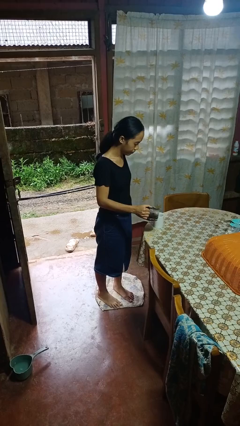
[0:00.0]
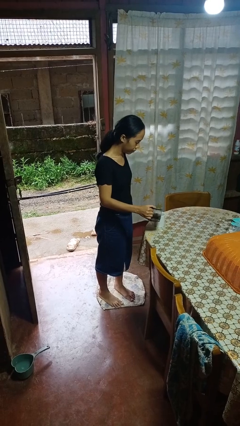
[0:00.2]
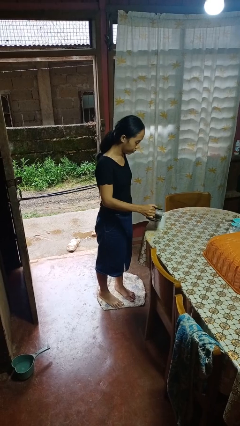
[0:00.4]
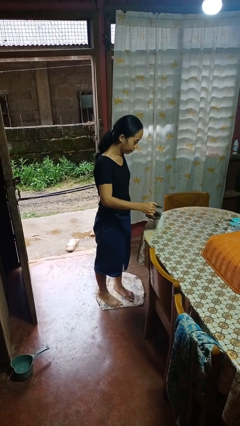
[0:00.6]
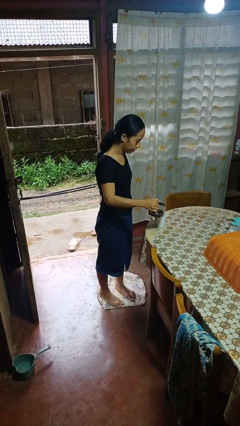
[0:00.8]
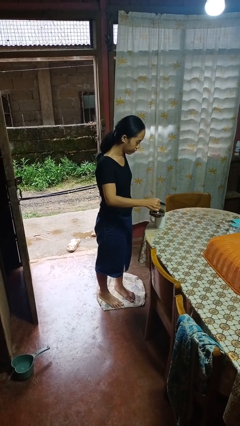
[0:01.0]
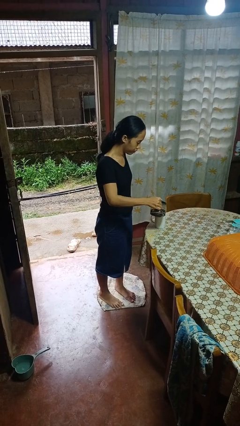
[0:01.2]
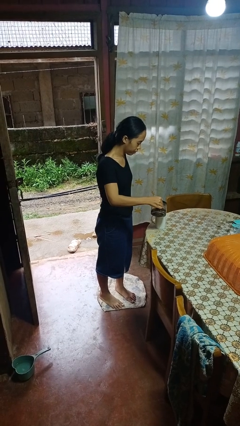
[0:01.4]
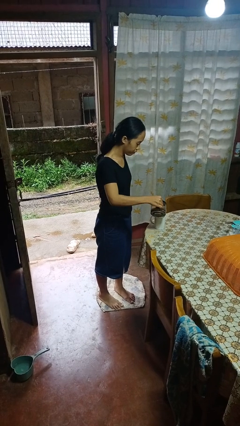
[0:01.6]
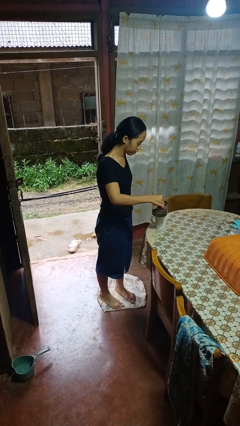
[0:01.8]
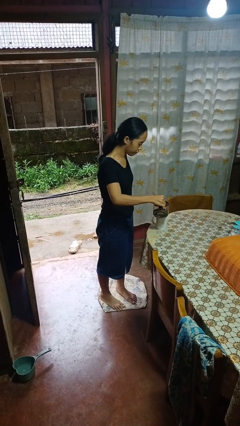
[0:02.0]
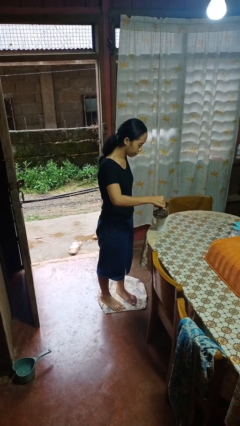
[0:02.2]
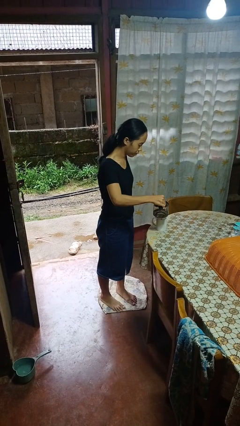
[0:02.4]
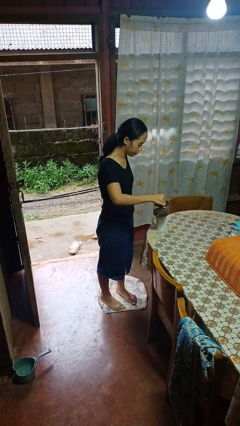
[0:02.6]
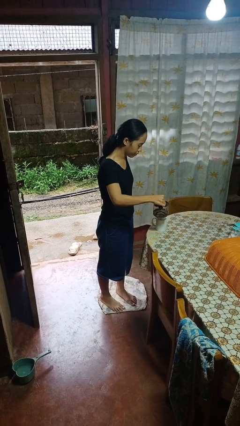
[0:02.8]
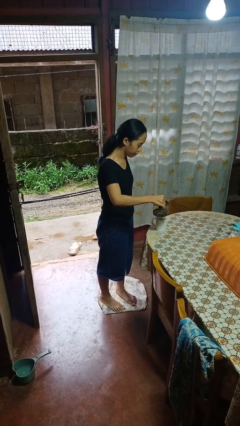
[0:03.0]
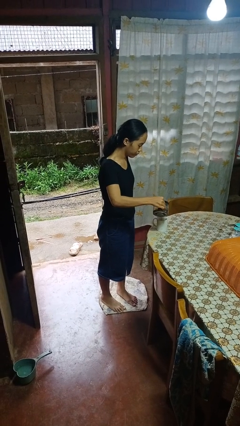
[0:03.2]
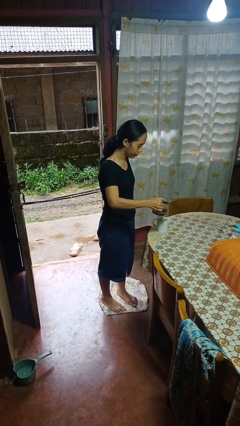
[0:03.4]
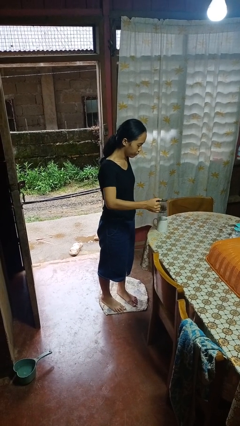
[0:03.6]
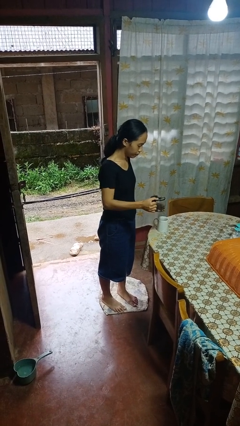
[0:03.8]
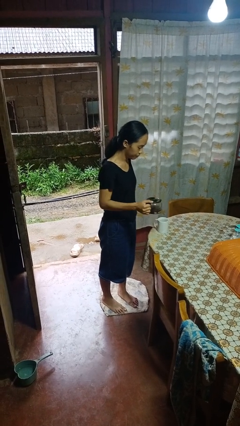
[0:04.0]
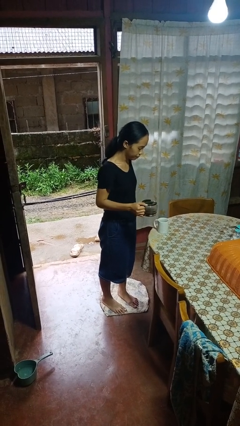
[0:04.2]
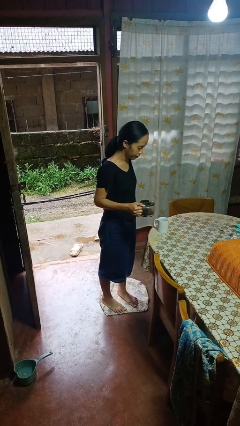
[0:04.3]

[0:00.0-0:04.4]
person pours coffee into mug

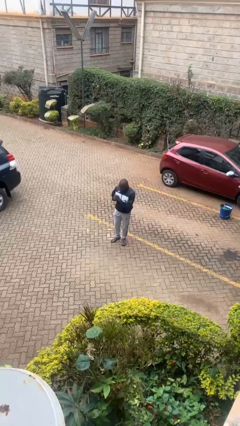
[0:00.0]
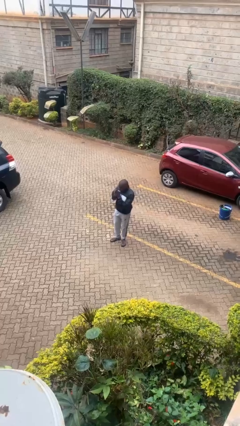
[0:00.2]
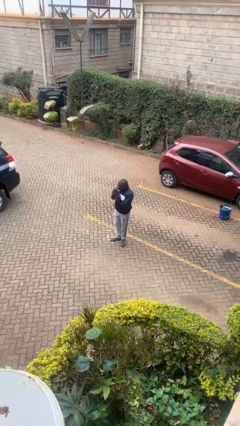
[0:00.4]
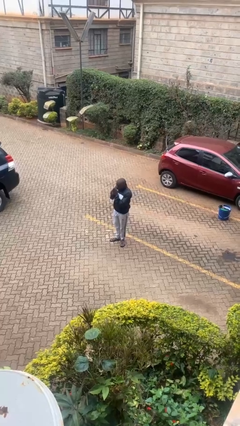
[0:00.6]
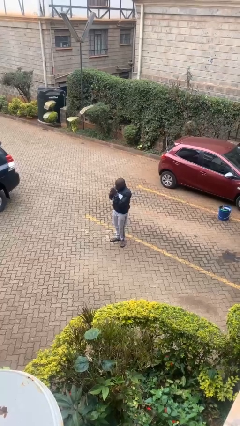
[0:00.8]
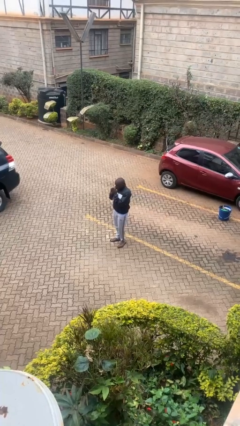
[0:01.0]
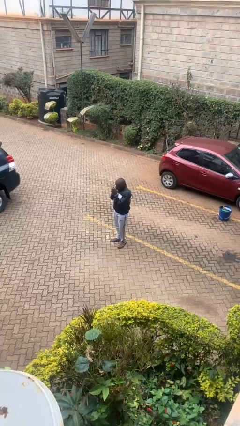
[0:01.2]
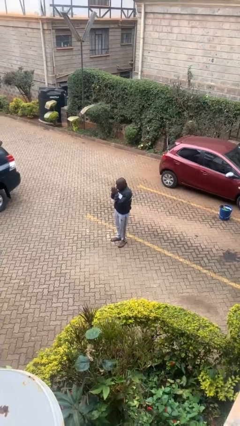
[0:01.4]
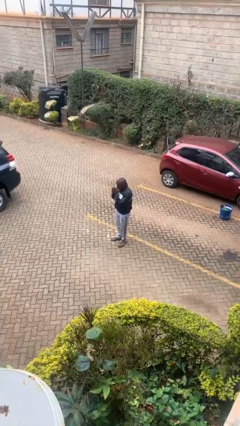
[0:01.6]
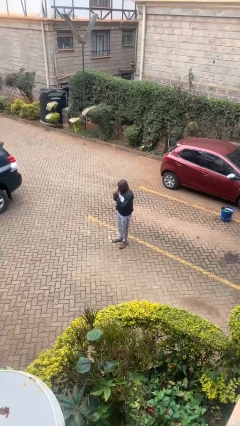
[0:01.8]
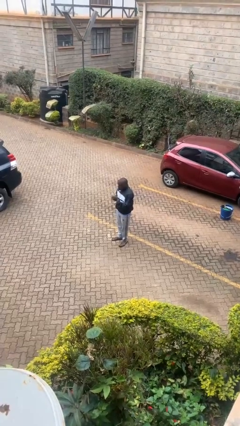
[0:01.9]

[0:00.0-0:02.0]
person blows into hands

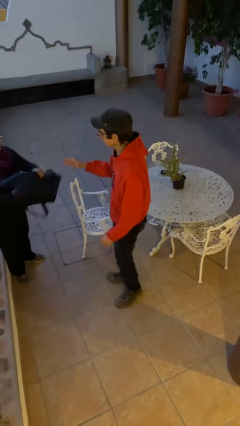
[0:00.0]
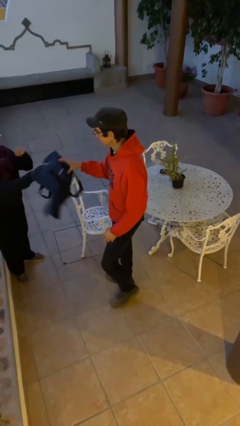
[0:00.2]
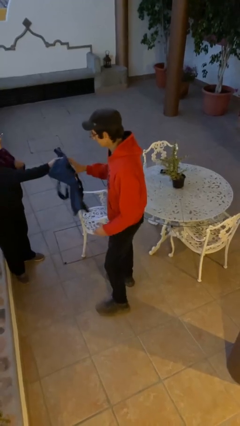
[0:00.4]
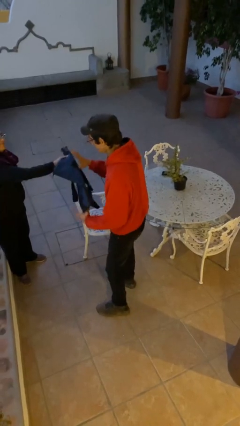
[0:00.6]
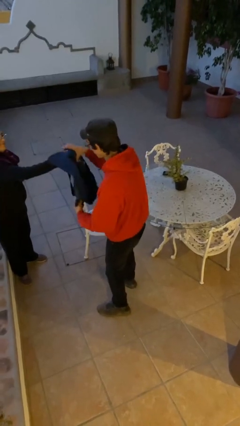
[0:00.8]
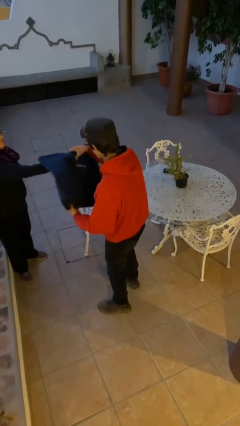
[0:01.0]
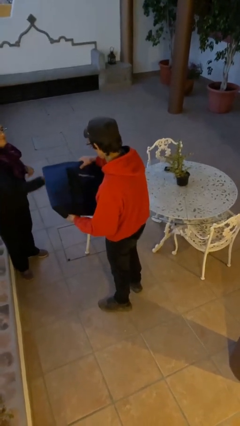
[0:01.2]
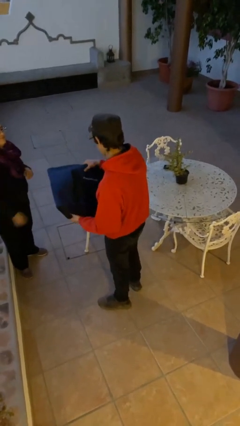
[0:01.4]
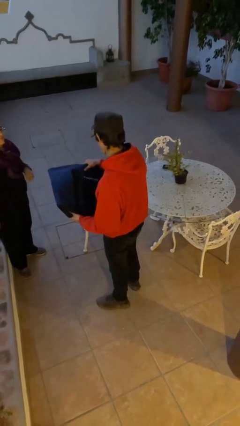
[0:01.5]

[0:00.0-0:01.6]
person transfers object to person

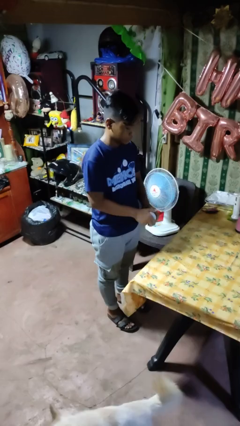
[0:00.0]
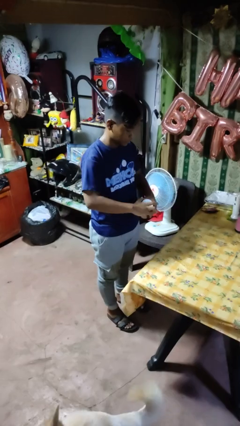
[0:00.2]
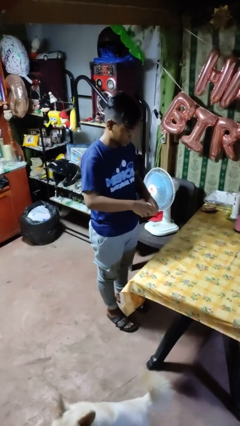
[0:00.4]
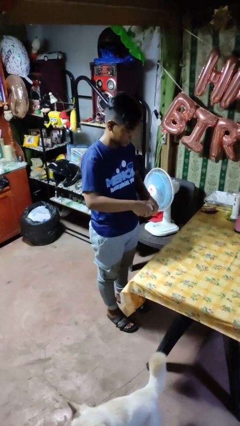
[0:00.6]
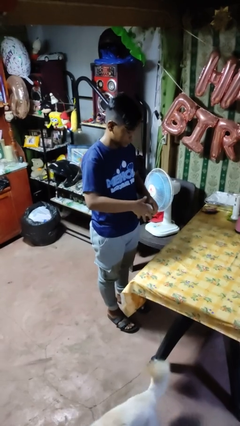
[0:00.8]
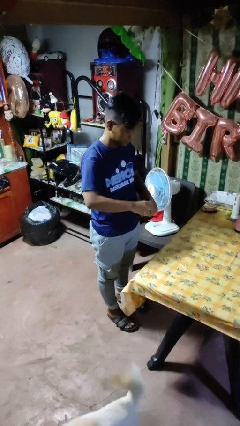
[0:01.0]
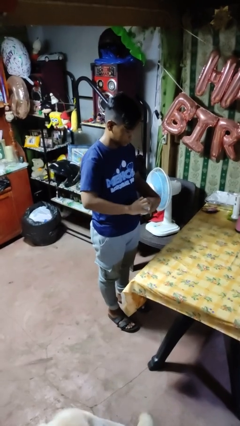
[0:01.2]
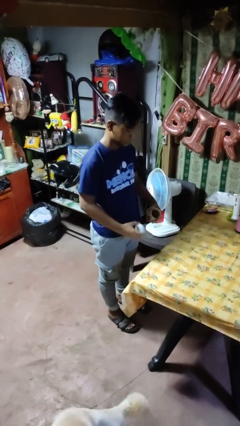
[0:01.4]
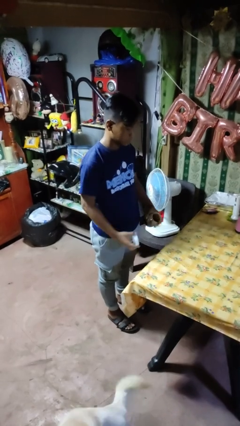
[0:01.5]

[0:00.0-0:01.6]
person opens jar

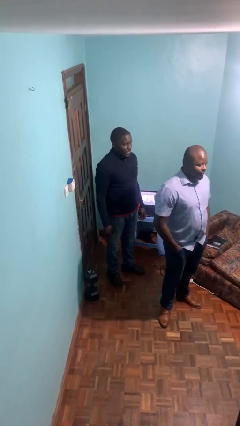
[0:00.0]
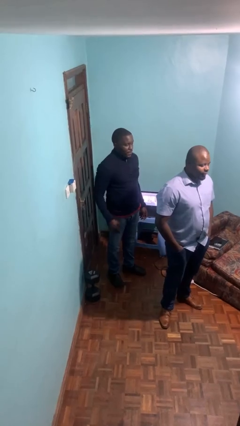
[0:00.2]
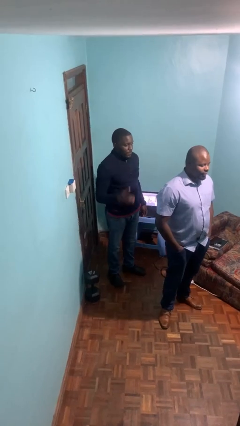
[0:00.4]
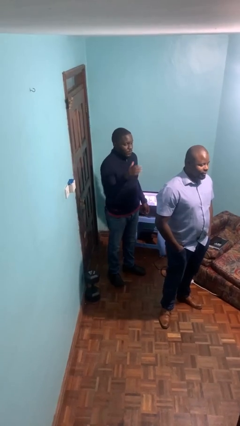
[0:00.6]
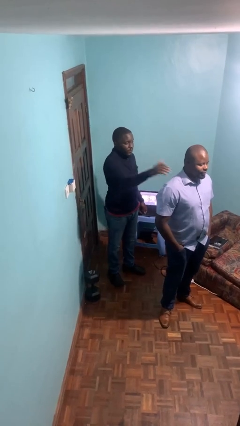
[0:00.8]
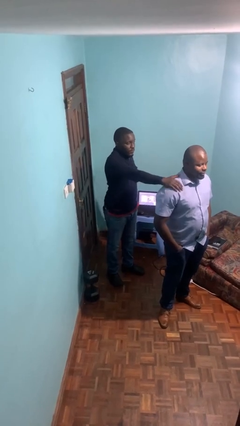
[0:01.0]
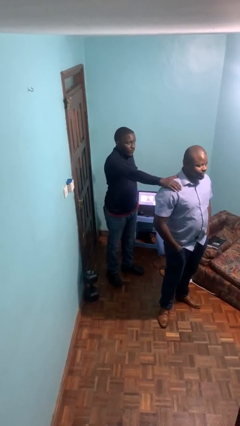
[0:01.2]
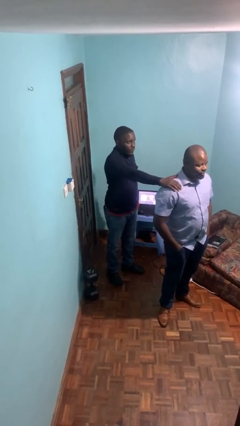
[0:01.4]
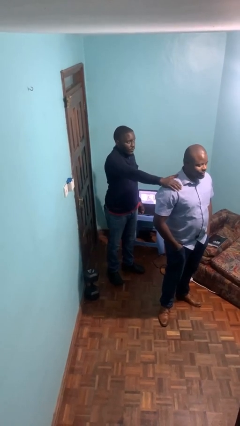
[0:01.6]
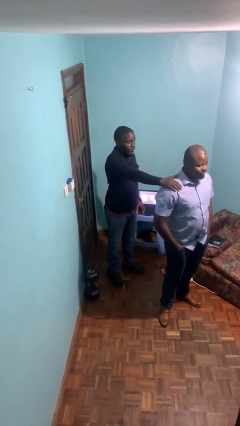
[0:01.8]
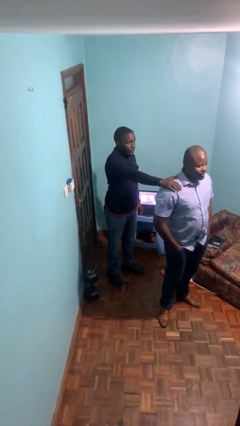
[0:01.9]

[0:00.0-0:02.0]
person grabs person by shoulder

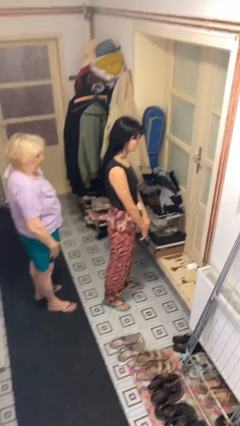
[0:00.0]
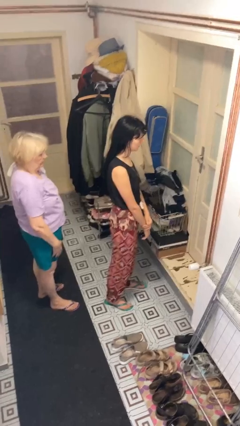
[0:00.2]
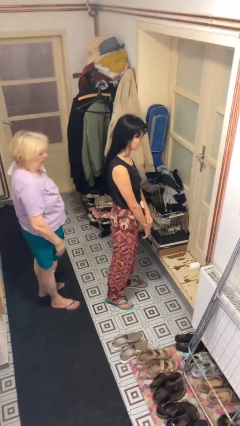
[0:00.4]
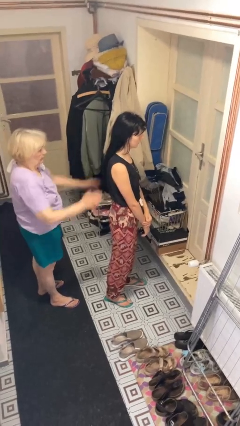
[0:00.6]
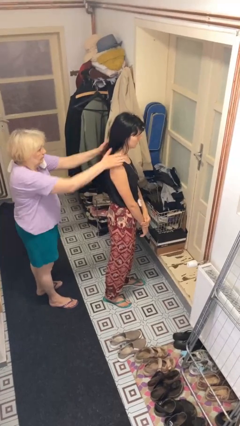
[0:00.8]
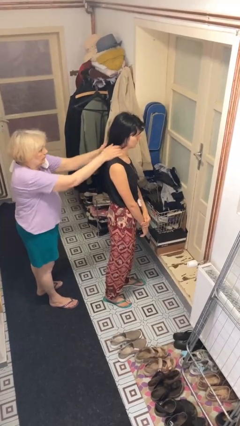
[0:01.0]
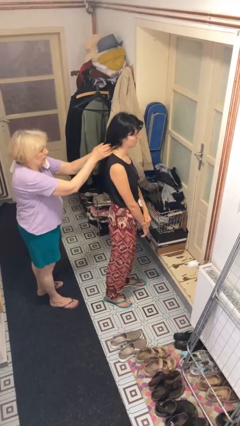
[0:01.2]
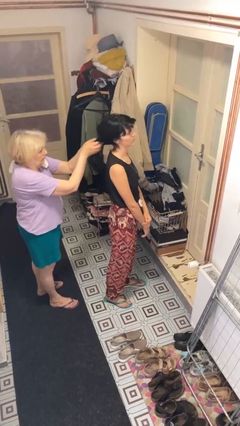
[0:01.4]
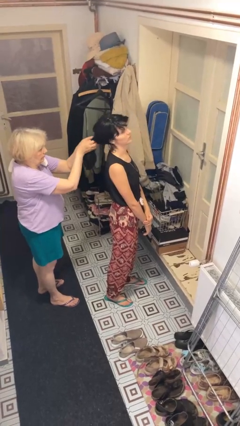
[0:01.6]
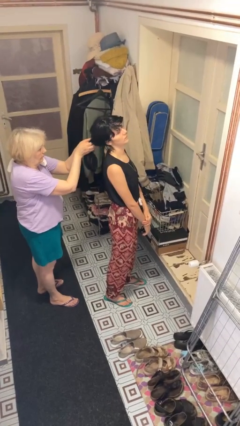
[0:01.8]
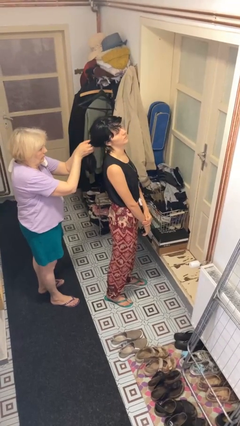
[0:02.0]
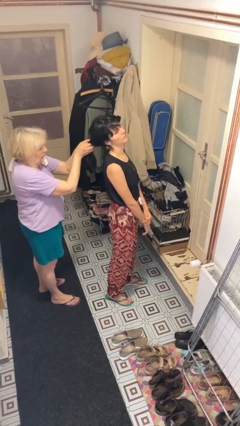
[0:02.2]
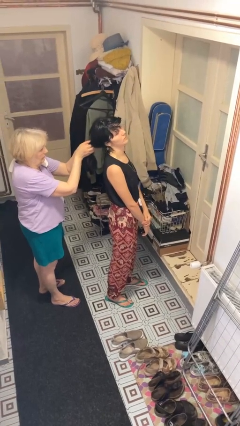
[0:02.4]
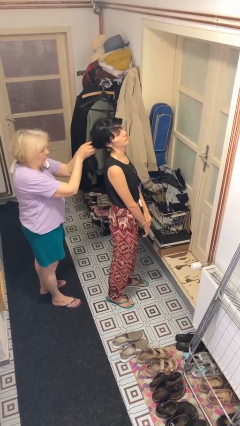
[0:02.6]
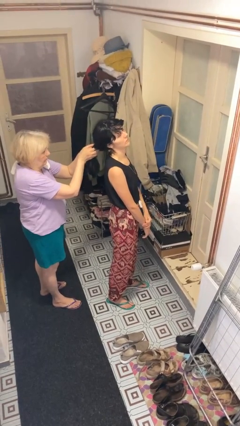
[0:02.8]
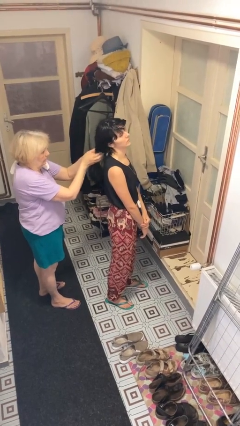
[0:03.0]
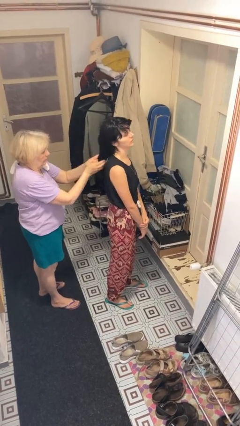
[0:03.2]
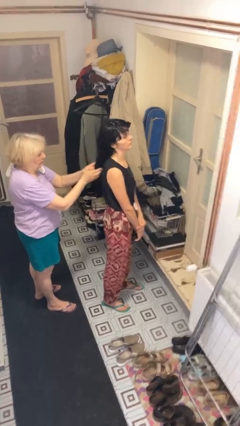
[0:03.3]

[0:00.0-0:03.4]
person grabs person by hair

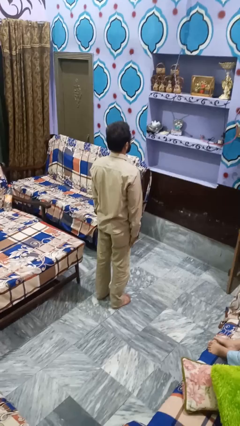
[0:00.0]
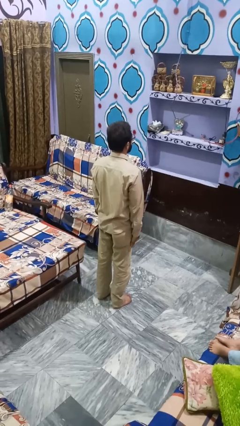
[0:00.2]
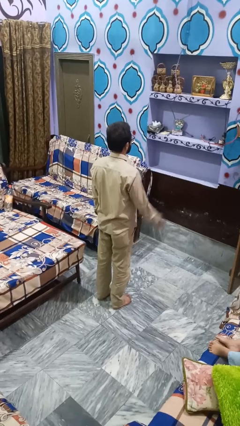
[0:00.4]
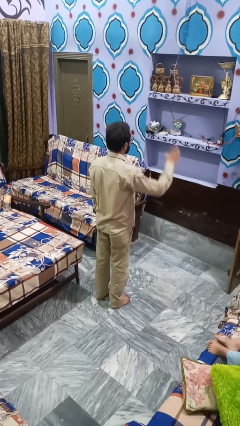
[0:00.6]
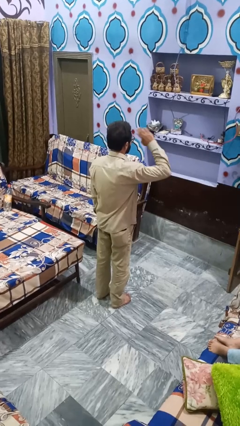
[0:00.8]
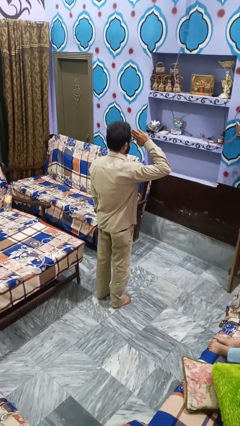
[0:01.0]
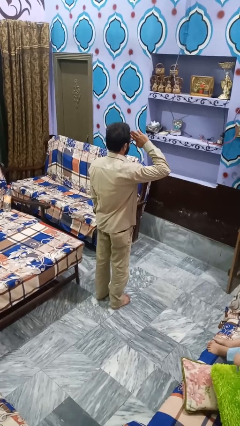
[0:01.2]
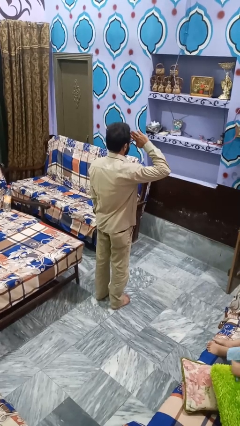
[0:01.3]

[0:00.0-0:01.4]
person salutes

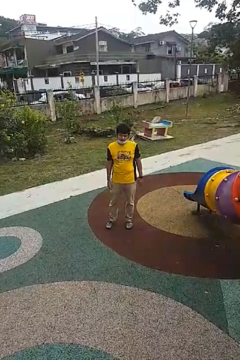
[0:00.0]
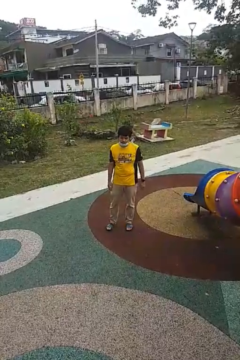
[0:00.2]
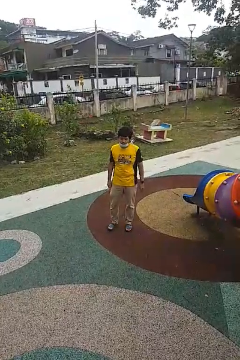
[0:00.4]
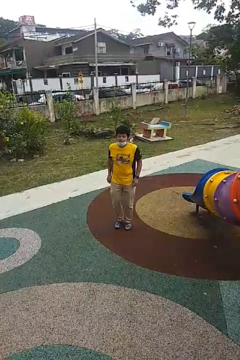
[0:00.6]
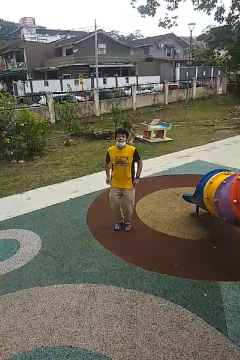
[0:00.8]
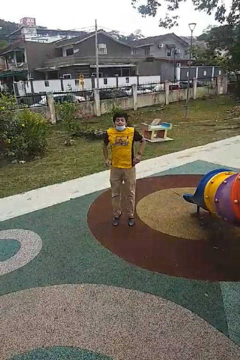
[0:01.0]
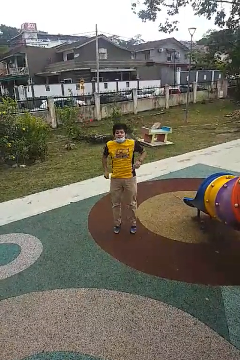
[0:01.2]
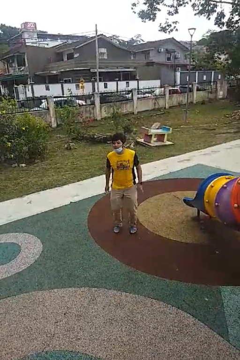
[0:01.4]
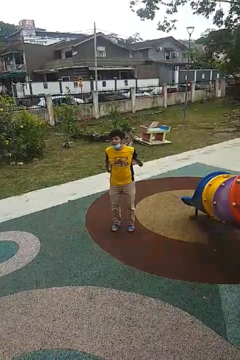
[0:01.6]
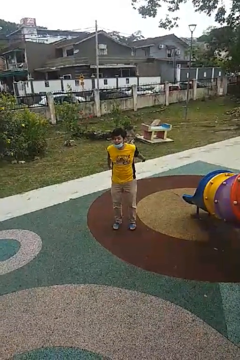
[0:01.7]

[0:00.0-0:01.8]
person jumps
